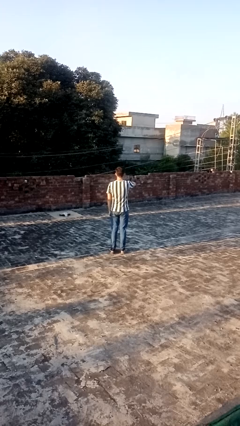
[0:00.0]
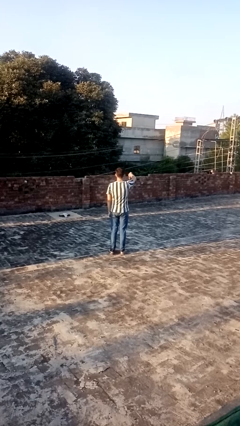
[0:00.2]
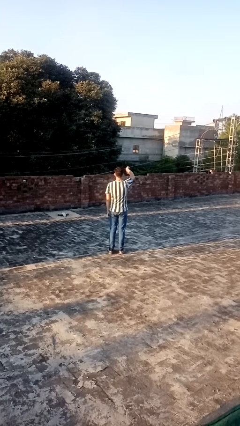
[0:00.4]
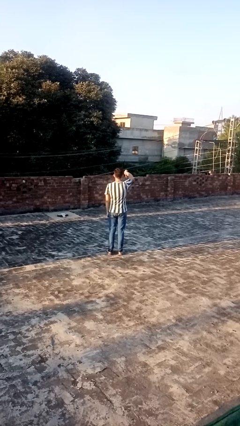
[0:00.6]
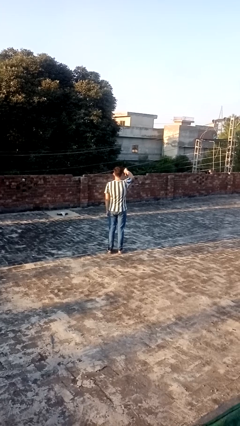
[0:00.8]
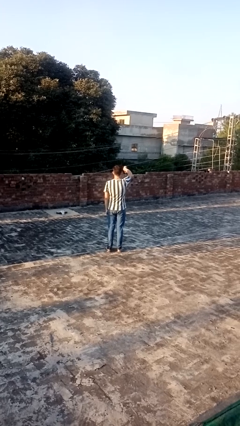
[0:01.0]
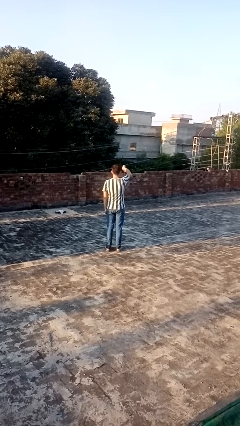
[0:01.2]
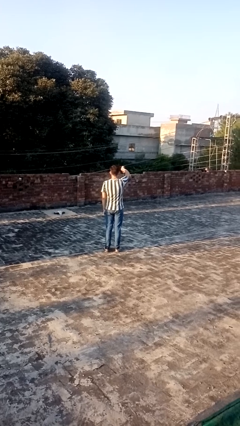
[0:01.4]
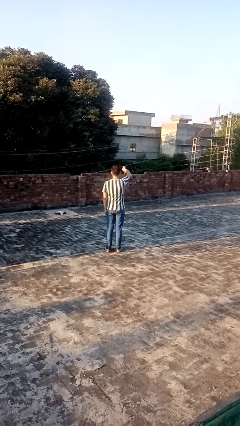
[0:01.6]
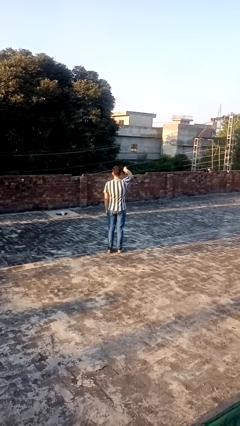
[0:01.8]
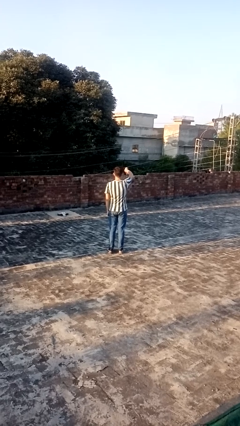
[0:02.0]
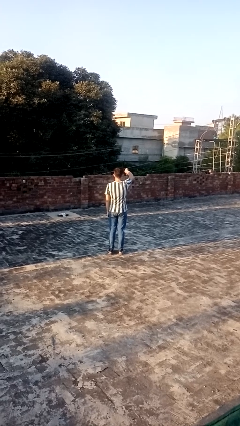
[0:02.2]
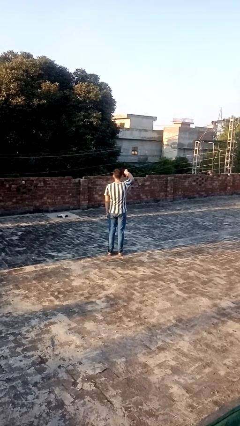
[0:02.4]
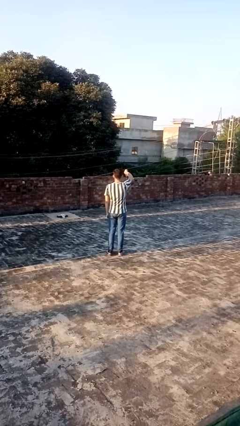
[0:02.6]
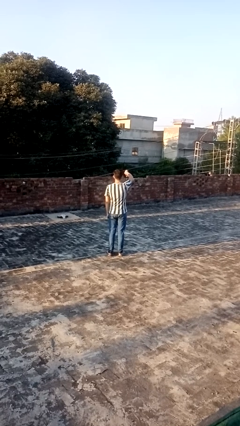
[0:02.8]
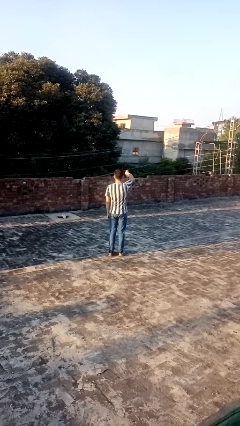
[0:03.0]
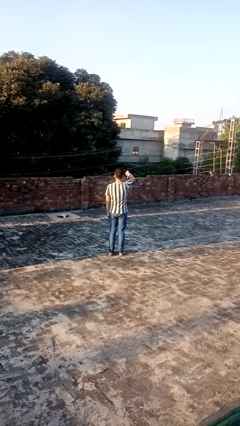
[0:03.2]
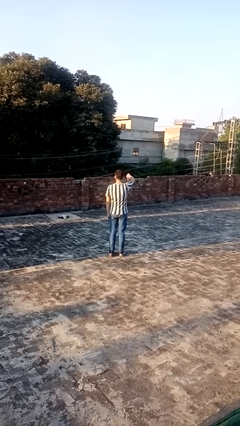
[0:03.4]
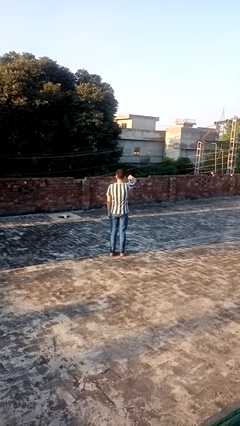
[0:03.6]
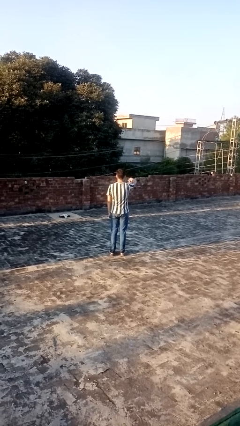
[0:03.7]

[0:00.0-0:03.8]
person gestures thumbs down

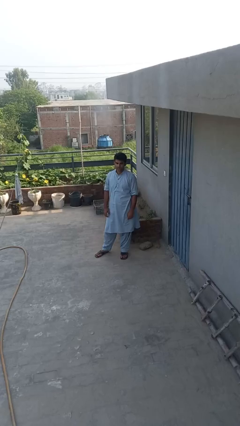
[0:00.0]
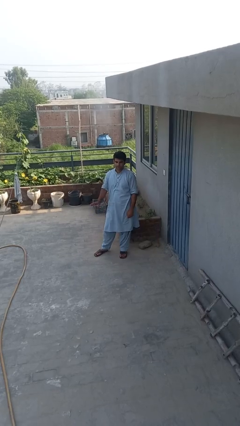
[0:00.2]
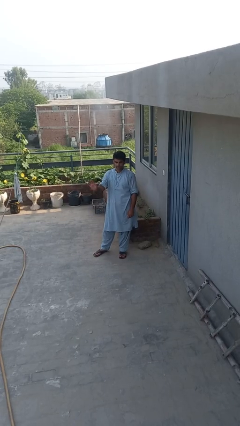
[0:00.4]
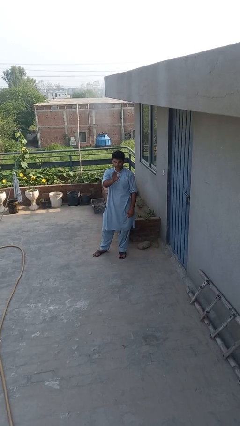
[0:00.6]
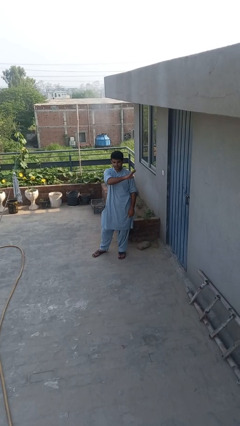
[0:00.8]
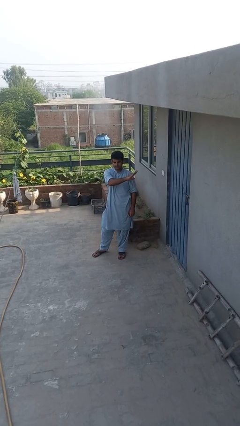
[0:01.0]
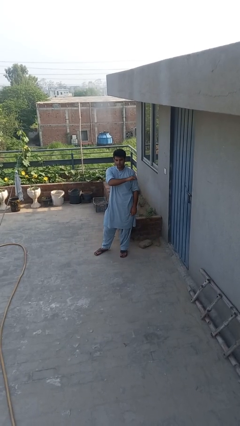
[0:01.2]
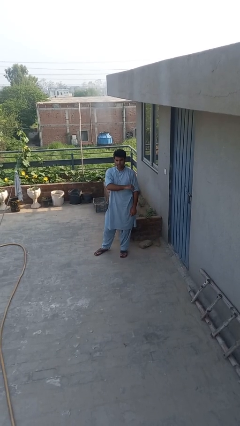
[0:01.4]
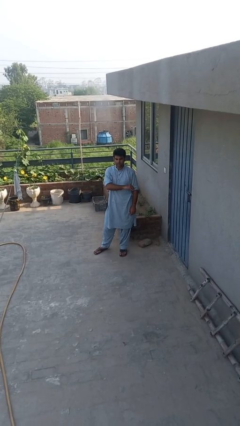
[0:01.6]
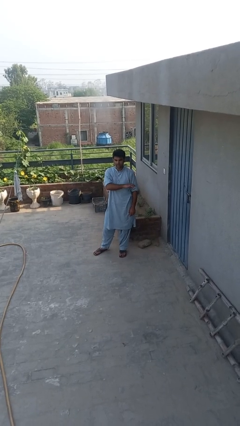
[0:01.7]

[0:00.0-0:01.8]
person gestures swipe left

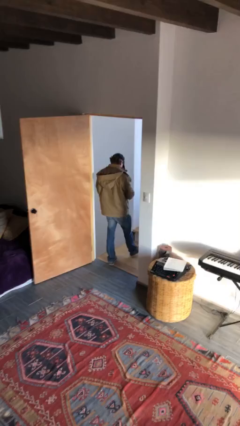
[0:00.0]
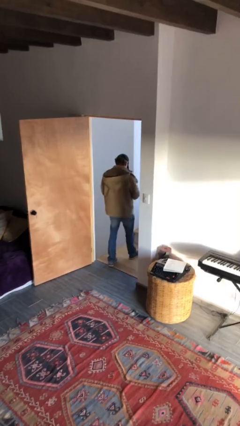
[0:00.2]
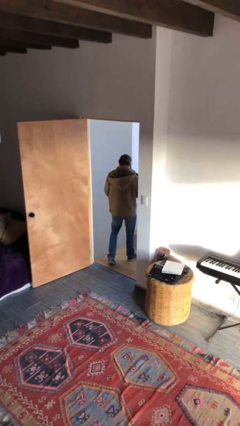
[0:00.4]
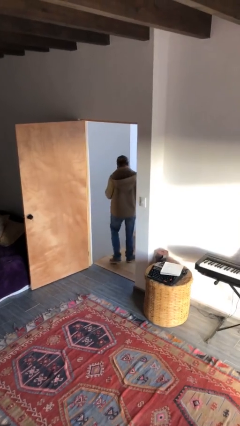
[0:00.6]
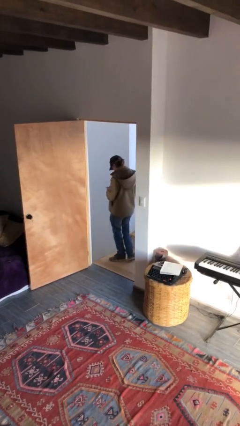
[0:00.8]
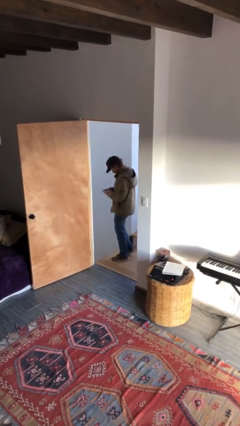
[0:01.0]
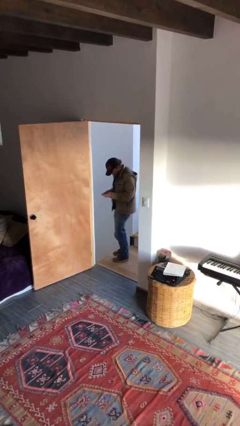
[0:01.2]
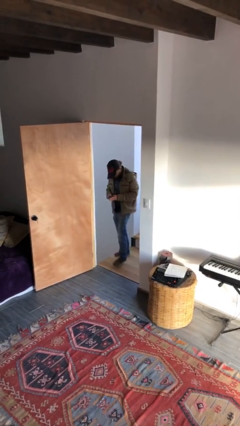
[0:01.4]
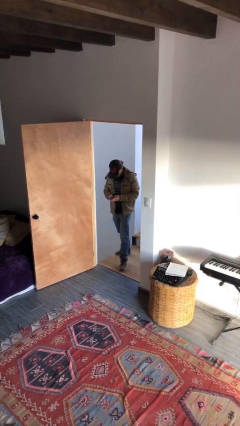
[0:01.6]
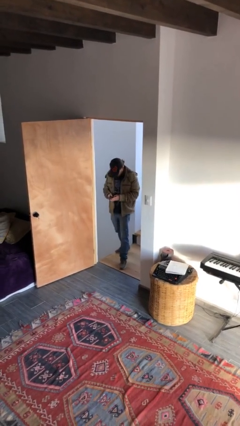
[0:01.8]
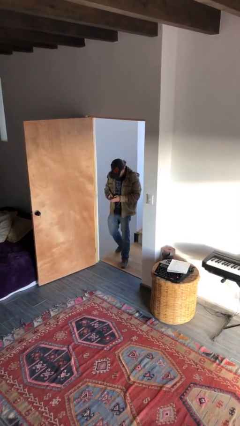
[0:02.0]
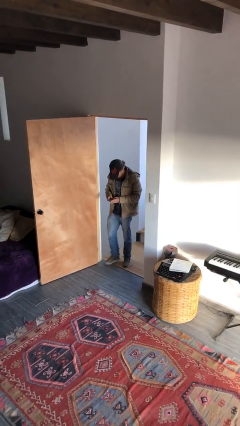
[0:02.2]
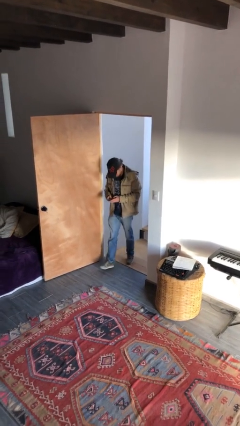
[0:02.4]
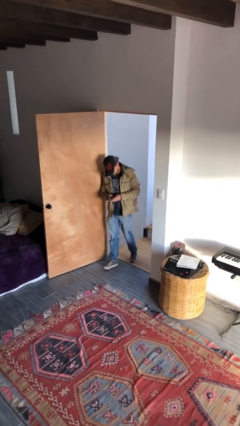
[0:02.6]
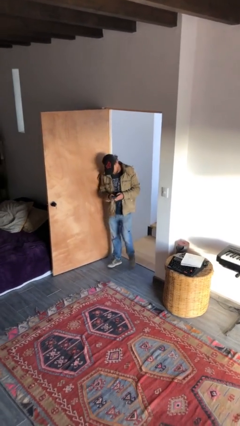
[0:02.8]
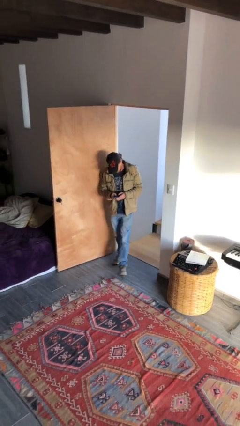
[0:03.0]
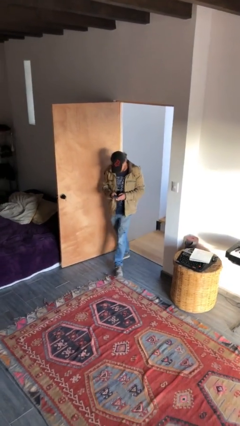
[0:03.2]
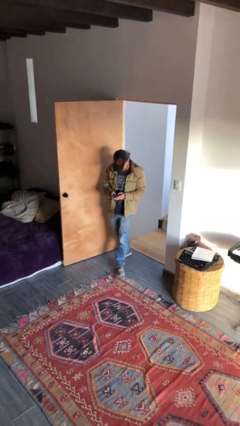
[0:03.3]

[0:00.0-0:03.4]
person enters scene through structure

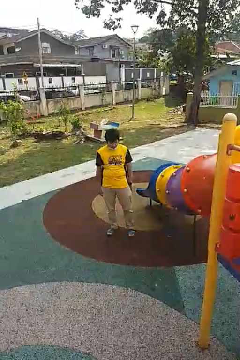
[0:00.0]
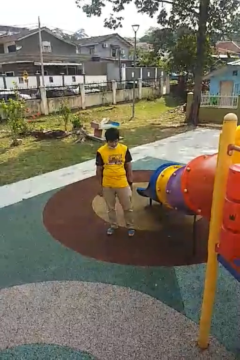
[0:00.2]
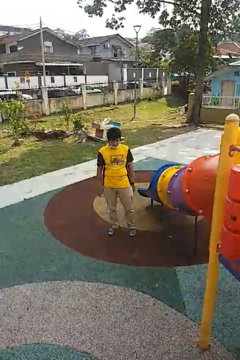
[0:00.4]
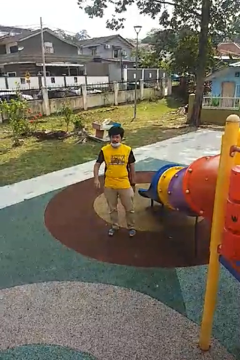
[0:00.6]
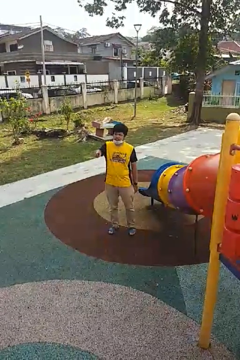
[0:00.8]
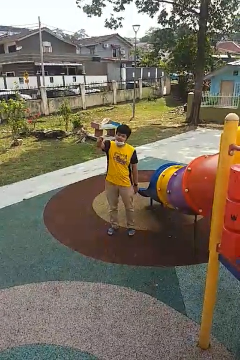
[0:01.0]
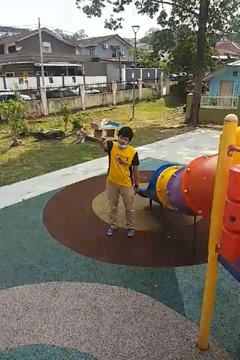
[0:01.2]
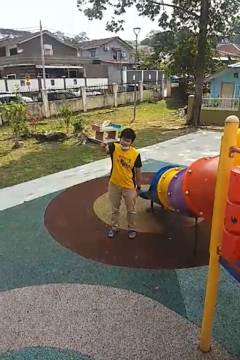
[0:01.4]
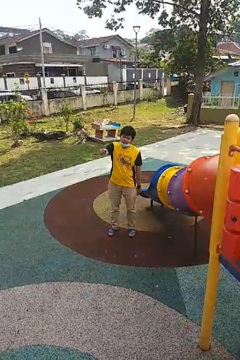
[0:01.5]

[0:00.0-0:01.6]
person points at person

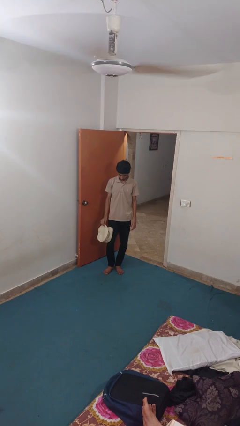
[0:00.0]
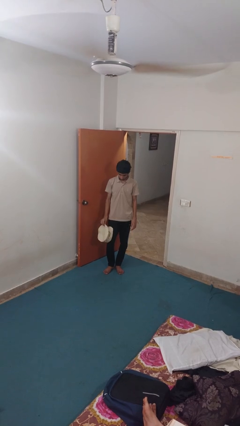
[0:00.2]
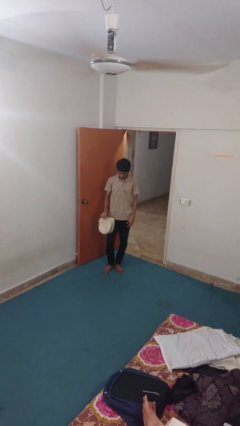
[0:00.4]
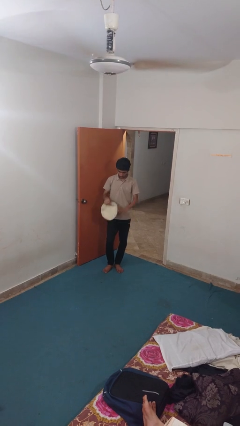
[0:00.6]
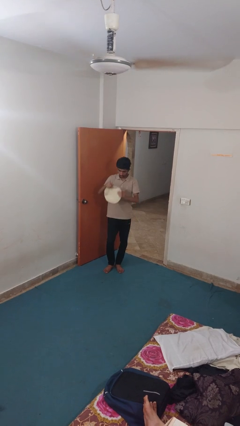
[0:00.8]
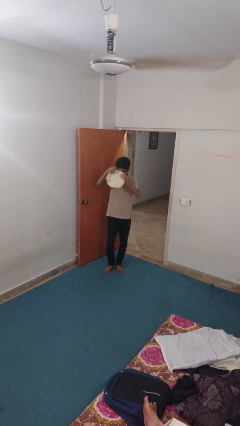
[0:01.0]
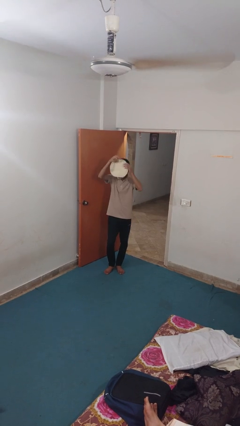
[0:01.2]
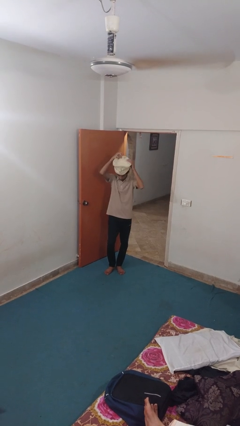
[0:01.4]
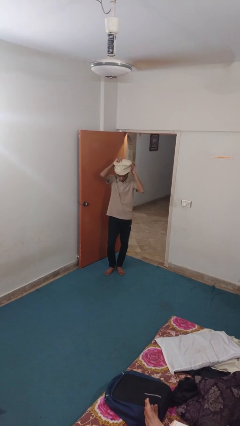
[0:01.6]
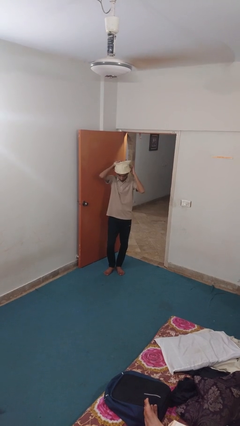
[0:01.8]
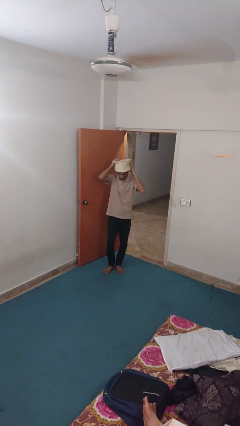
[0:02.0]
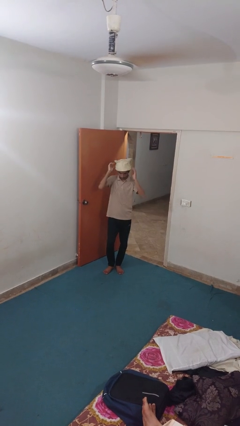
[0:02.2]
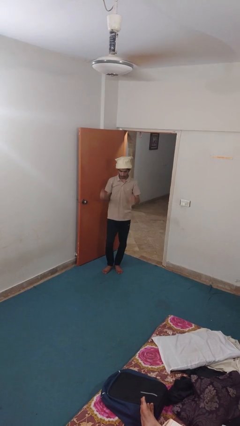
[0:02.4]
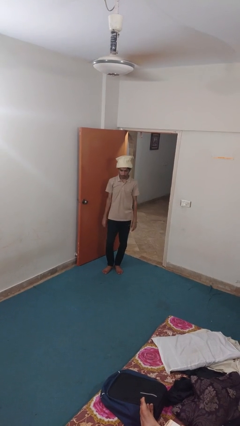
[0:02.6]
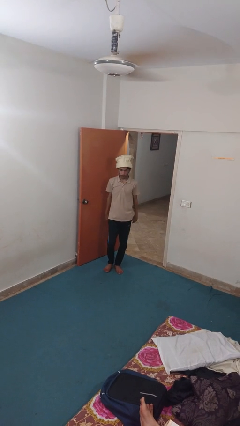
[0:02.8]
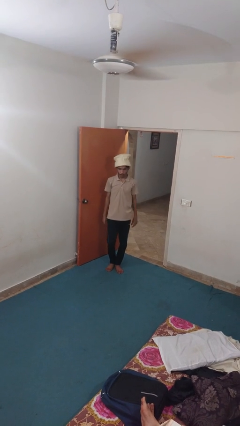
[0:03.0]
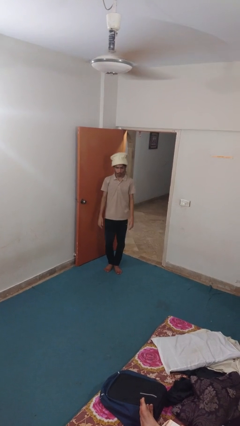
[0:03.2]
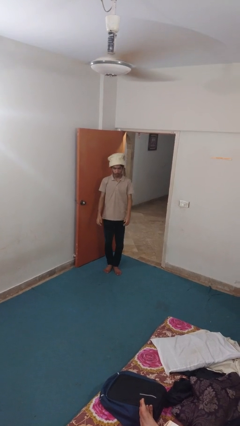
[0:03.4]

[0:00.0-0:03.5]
person puts on hat

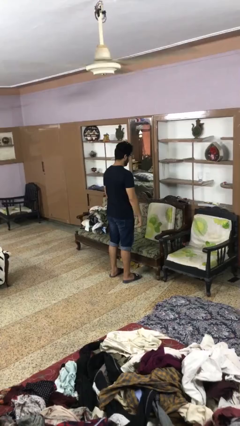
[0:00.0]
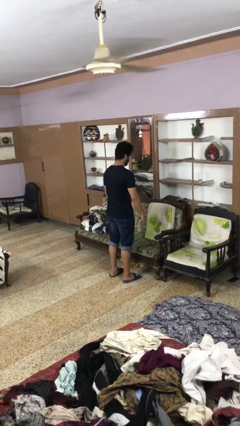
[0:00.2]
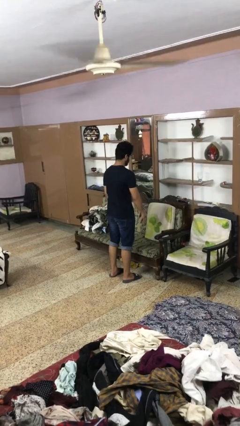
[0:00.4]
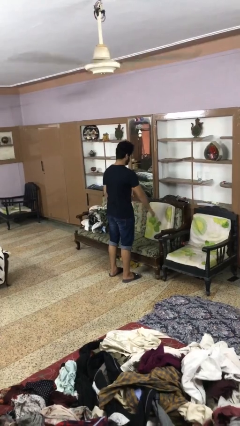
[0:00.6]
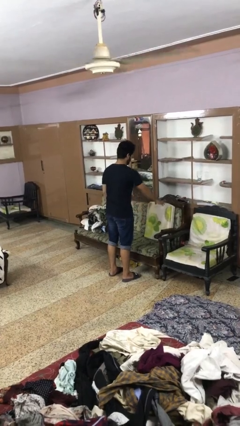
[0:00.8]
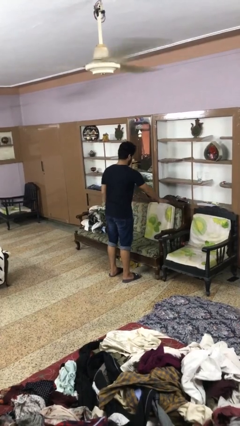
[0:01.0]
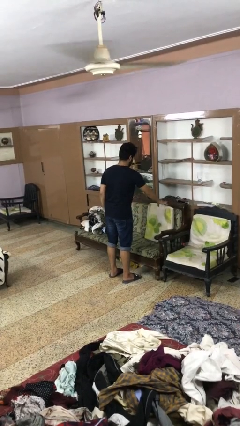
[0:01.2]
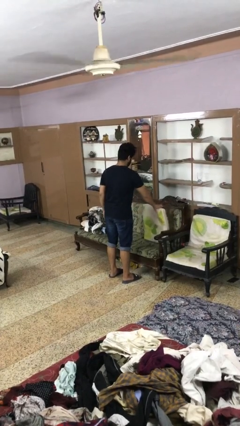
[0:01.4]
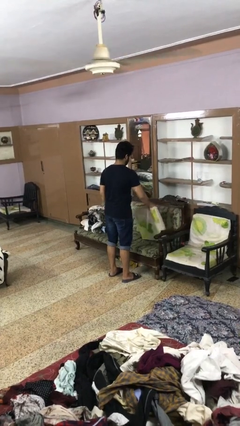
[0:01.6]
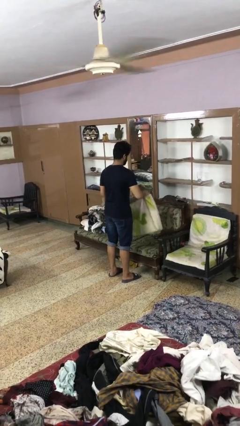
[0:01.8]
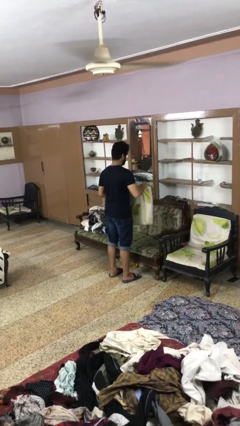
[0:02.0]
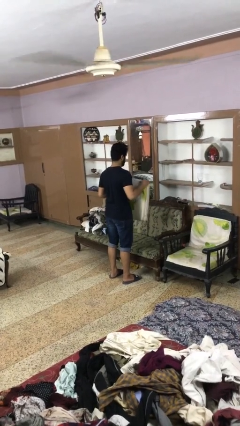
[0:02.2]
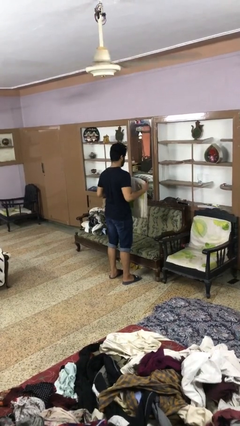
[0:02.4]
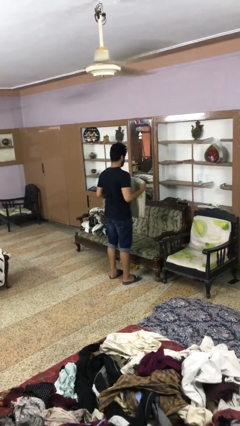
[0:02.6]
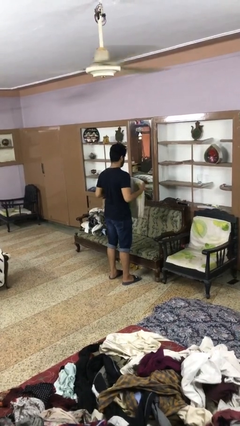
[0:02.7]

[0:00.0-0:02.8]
person picks up object from couch

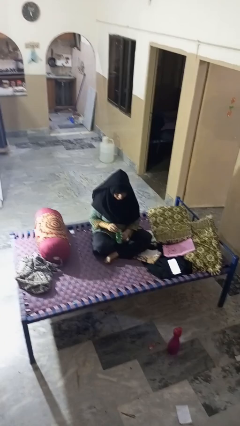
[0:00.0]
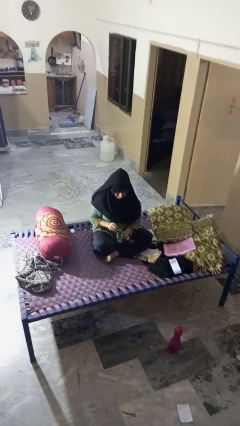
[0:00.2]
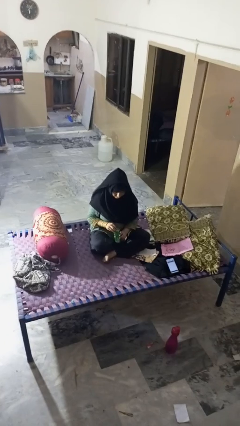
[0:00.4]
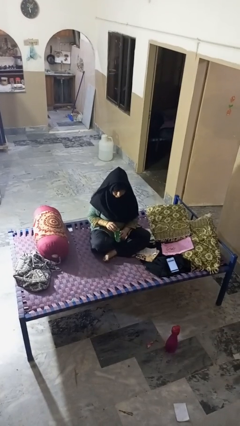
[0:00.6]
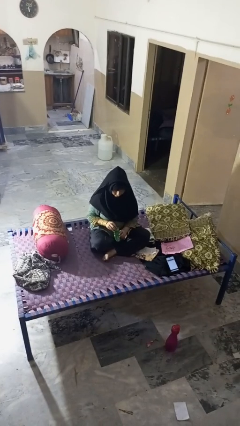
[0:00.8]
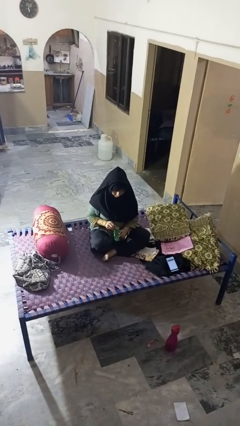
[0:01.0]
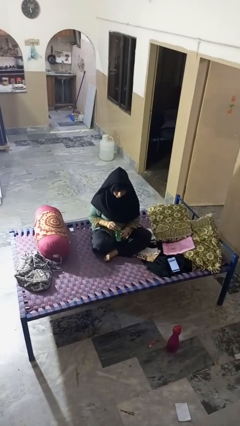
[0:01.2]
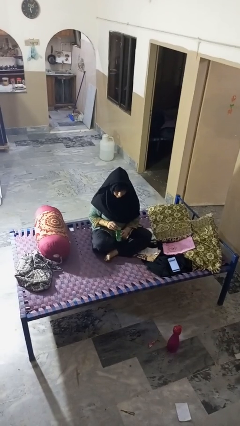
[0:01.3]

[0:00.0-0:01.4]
person opens can with can opener
